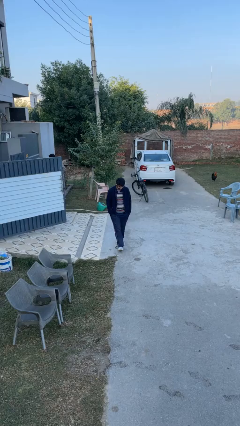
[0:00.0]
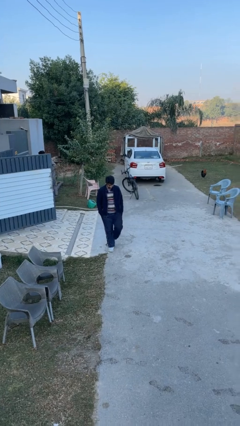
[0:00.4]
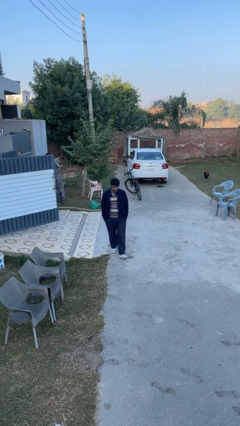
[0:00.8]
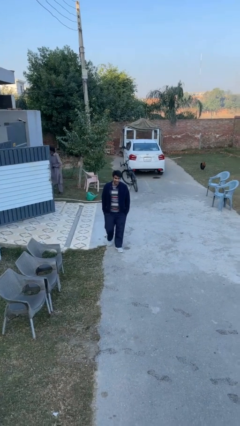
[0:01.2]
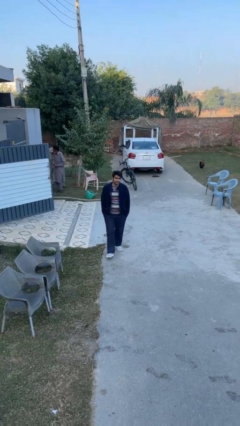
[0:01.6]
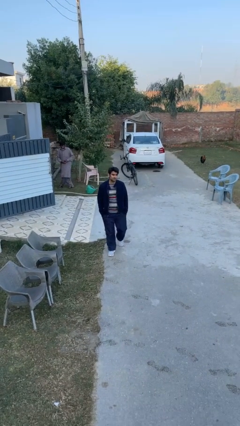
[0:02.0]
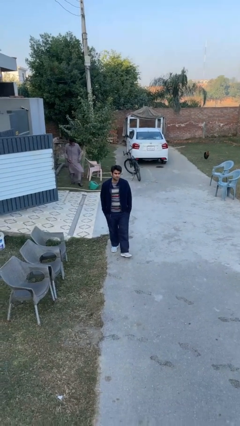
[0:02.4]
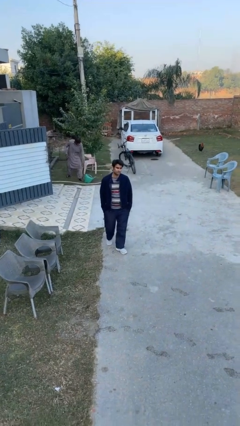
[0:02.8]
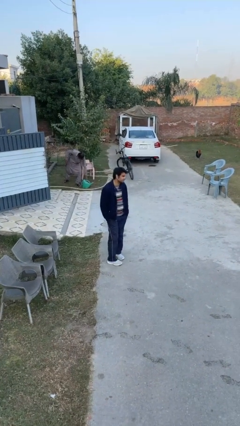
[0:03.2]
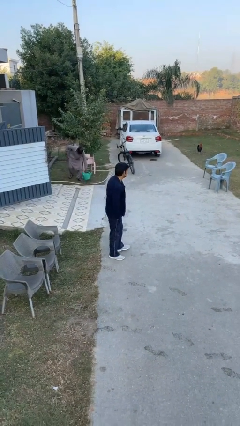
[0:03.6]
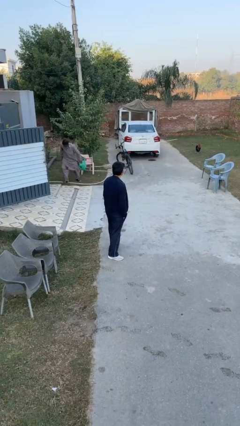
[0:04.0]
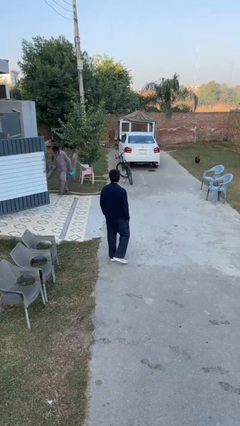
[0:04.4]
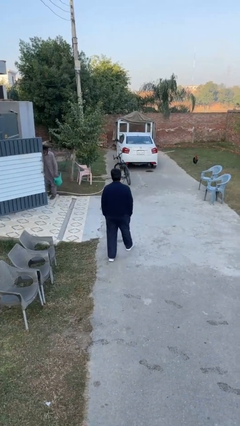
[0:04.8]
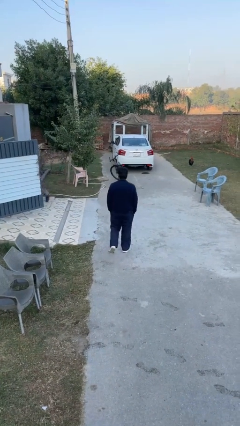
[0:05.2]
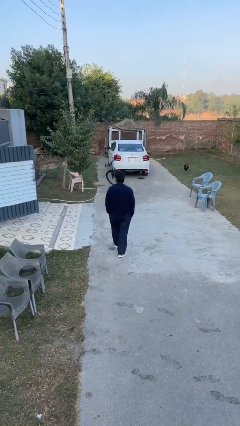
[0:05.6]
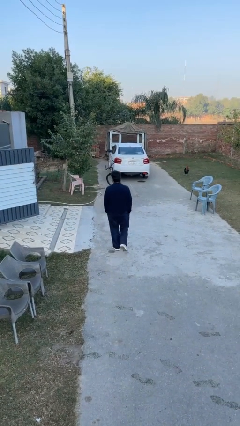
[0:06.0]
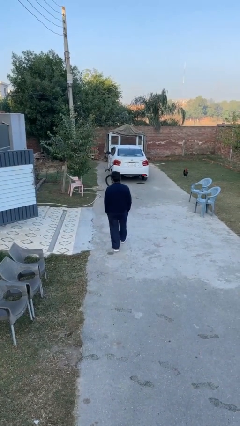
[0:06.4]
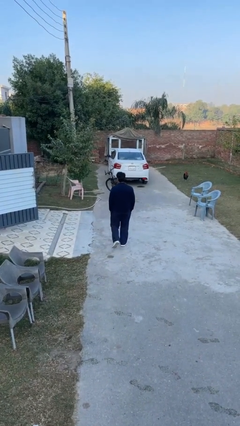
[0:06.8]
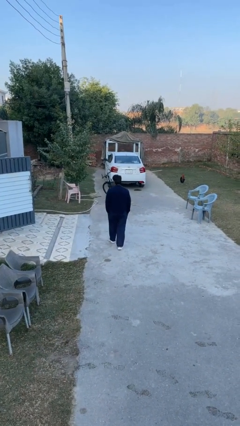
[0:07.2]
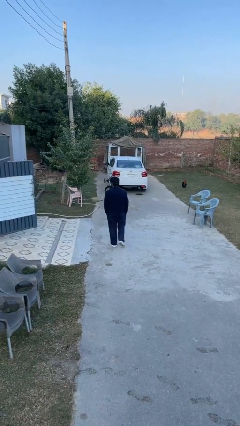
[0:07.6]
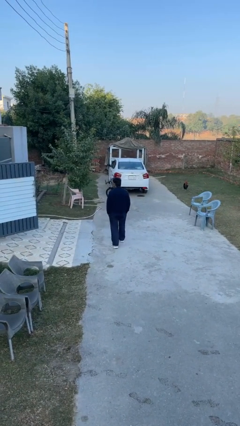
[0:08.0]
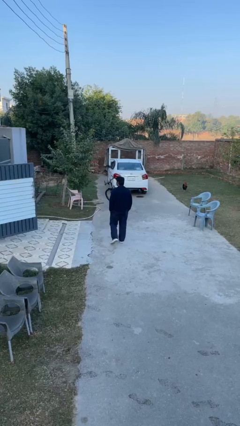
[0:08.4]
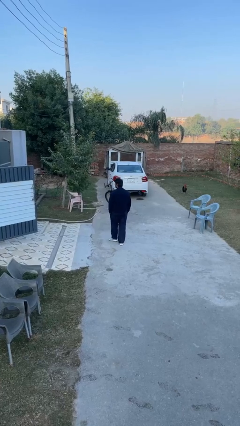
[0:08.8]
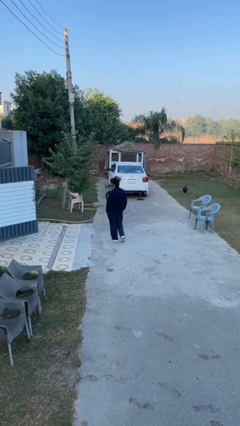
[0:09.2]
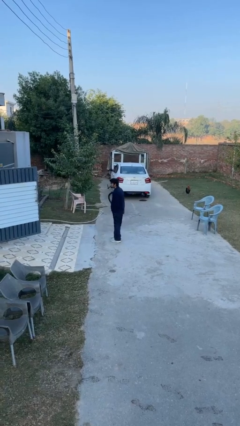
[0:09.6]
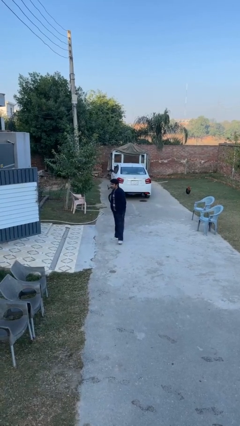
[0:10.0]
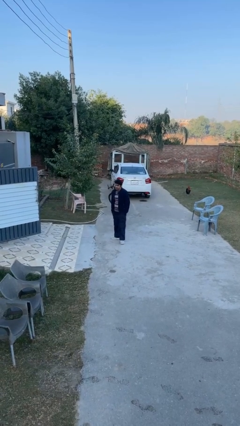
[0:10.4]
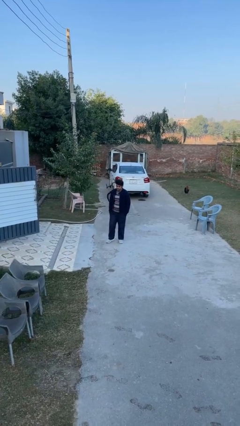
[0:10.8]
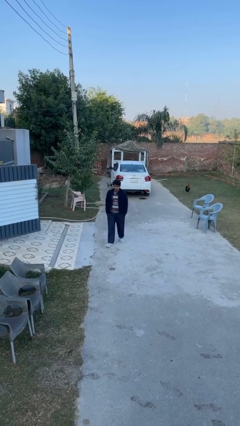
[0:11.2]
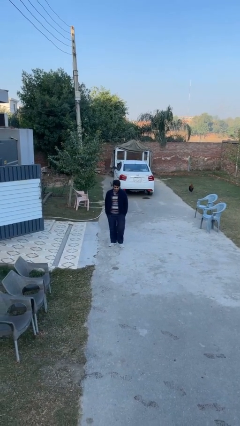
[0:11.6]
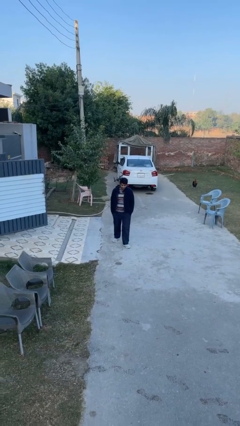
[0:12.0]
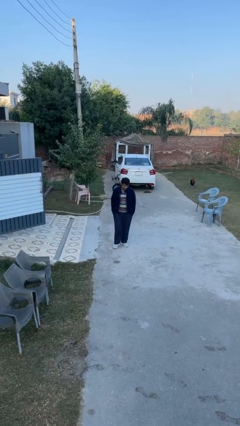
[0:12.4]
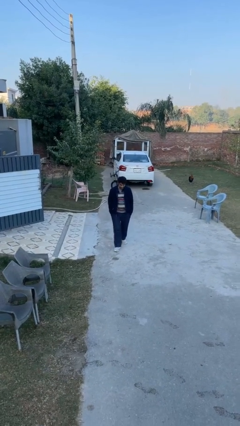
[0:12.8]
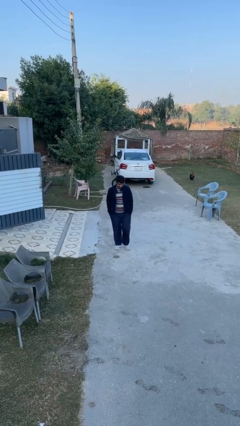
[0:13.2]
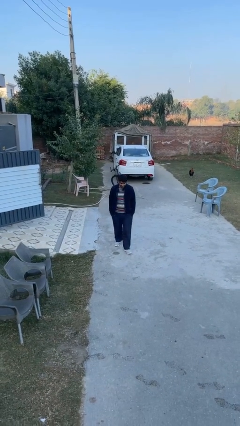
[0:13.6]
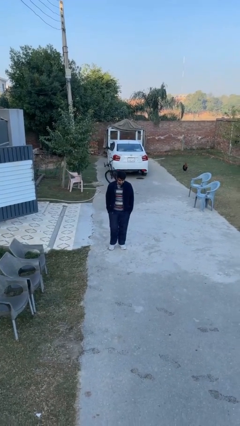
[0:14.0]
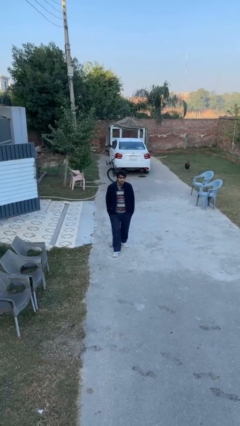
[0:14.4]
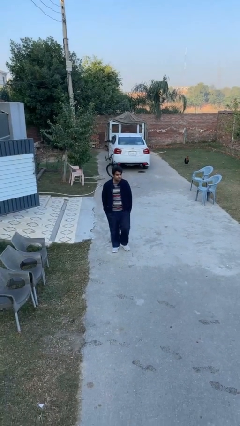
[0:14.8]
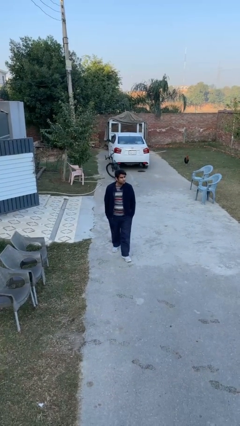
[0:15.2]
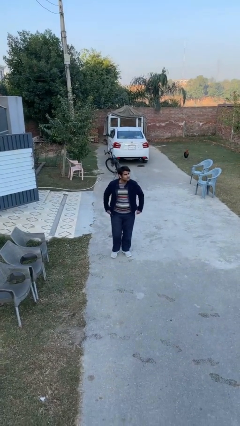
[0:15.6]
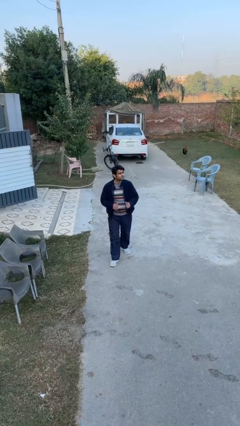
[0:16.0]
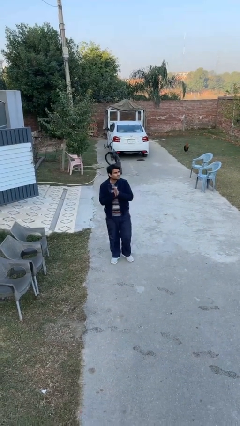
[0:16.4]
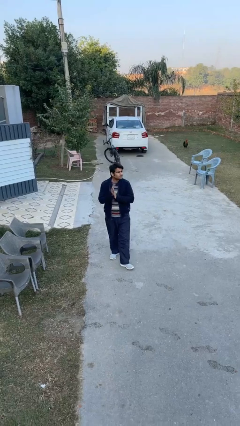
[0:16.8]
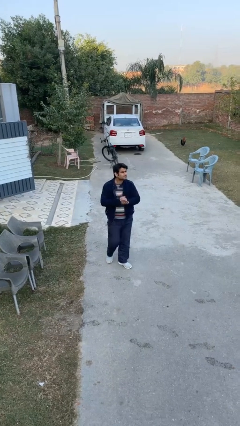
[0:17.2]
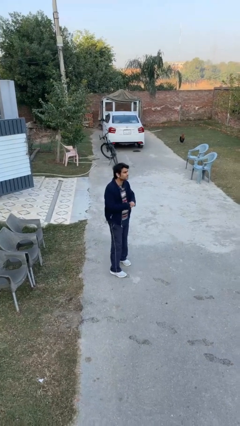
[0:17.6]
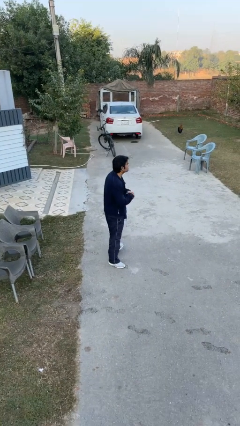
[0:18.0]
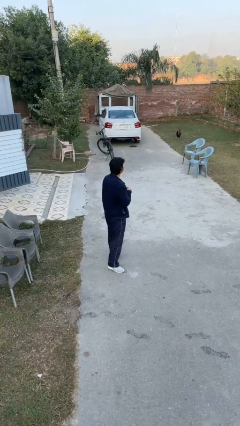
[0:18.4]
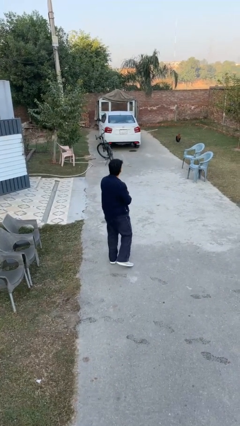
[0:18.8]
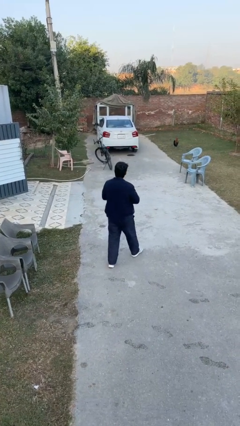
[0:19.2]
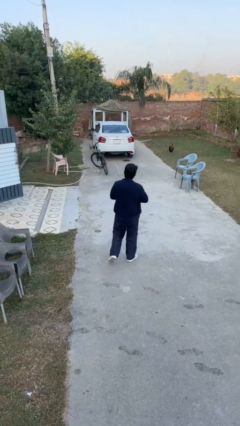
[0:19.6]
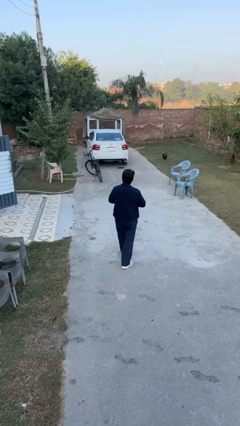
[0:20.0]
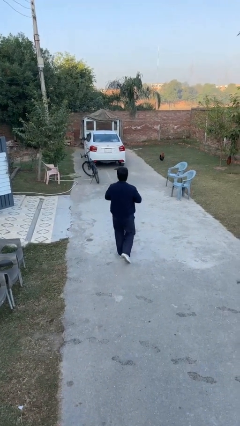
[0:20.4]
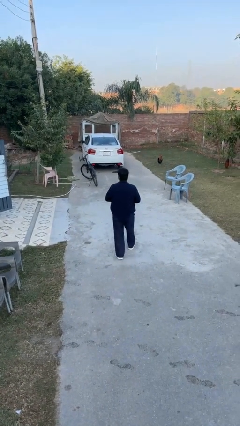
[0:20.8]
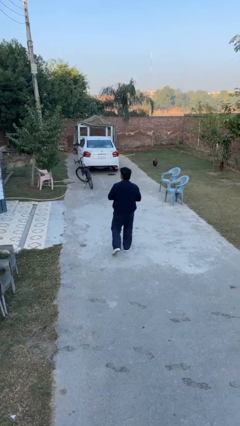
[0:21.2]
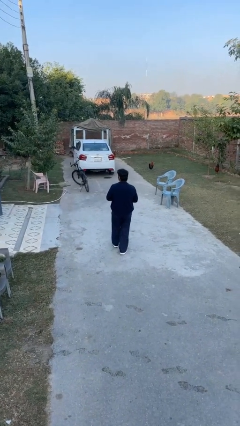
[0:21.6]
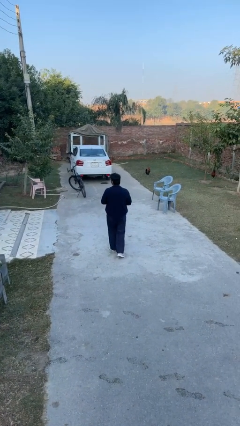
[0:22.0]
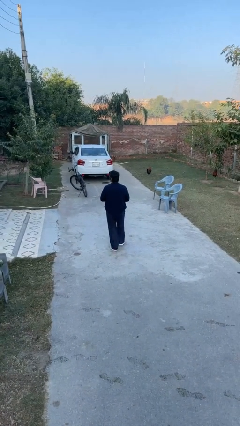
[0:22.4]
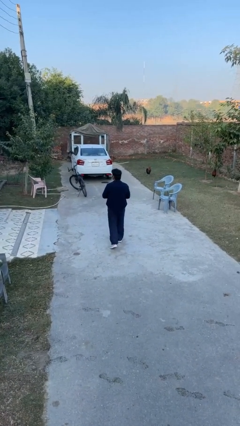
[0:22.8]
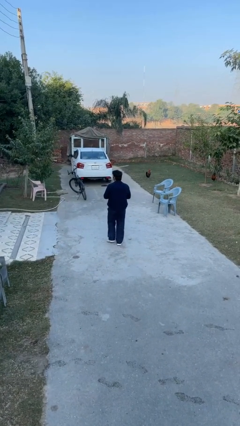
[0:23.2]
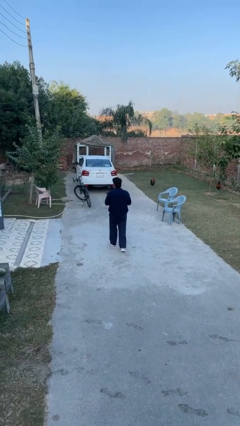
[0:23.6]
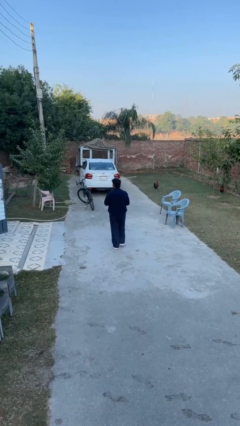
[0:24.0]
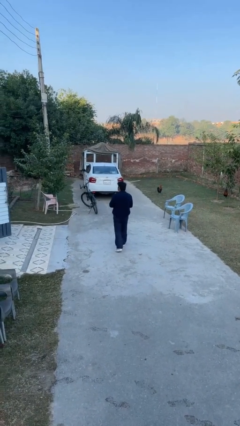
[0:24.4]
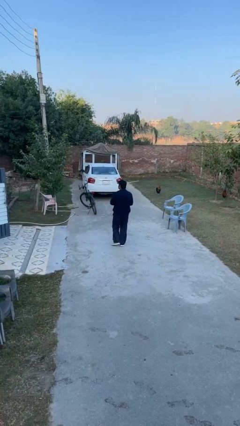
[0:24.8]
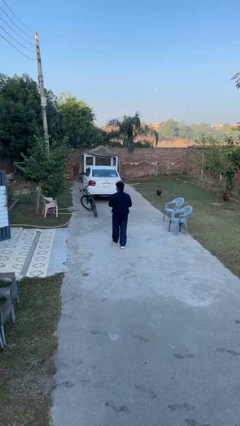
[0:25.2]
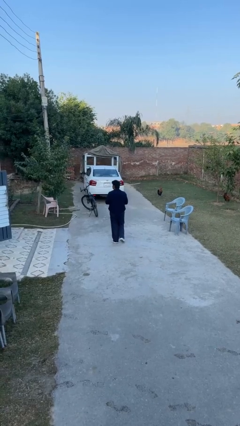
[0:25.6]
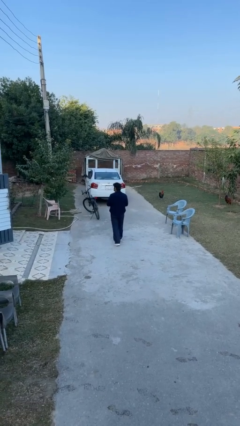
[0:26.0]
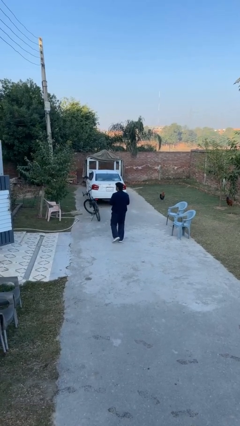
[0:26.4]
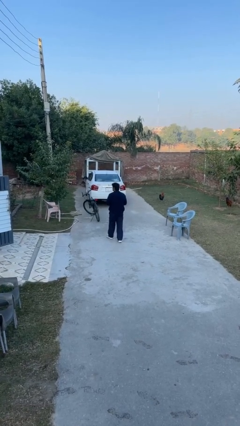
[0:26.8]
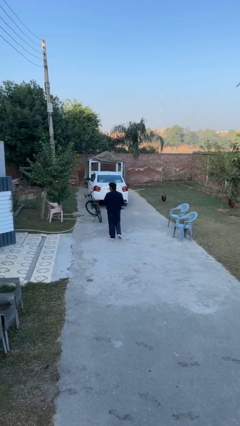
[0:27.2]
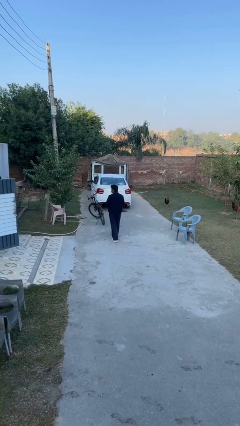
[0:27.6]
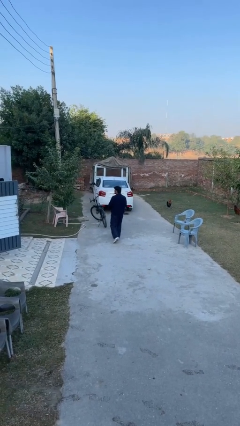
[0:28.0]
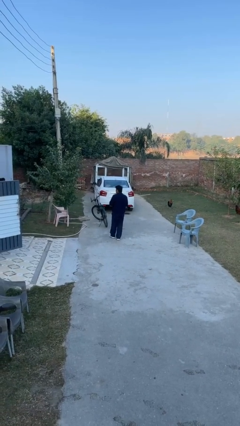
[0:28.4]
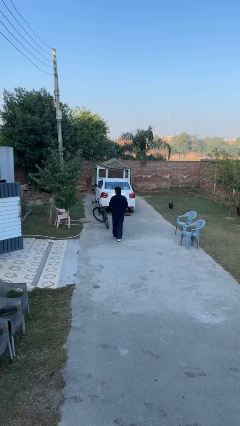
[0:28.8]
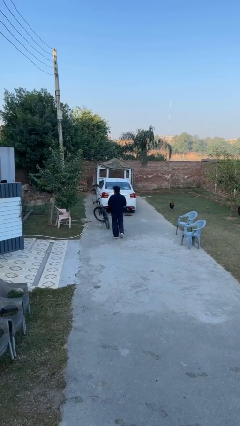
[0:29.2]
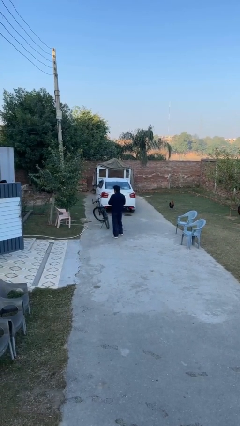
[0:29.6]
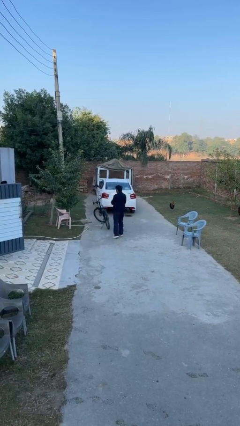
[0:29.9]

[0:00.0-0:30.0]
person walks

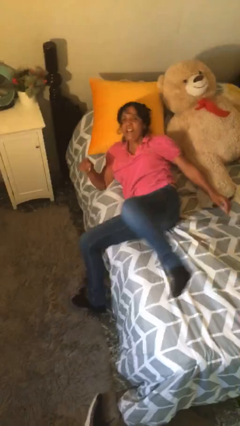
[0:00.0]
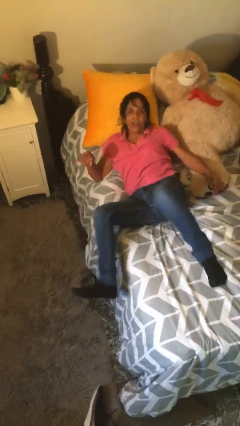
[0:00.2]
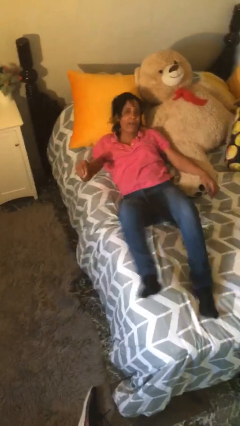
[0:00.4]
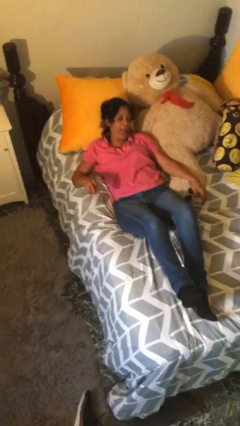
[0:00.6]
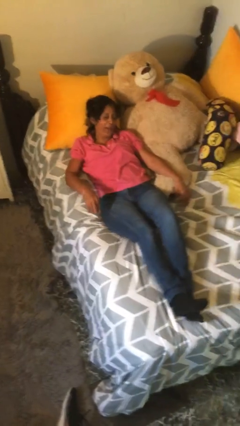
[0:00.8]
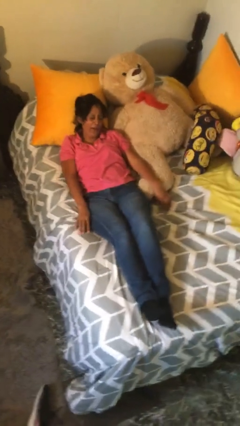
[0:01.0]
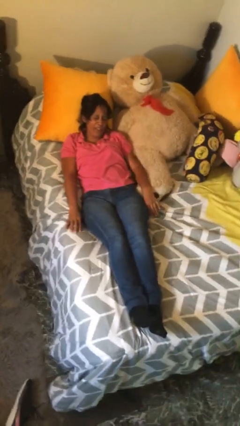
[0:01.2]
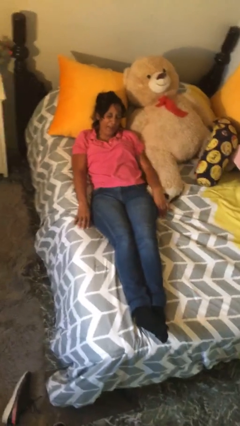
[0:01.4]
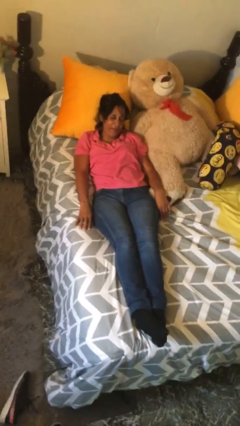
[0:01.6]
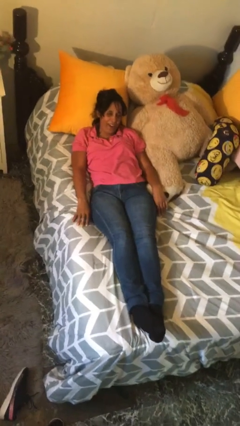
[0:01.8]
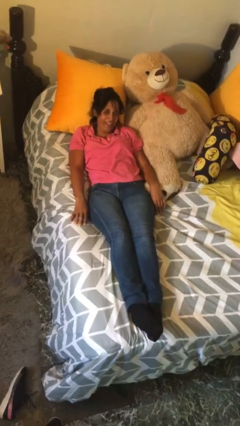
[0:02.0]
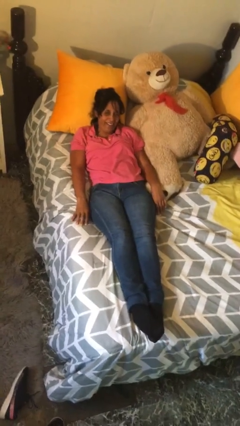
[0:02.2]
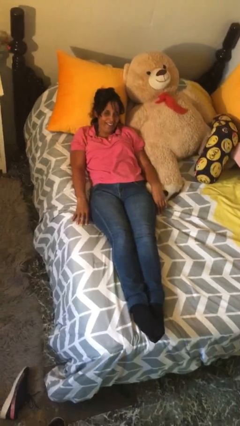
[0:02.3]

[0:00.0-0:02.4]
person lies down on bed

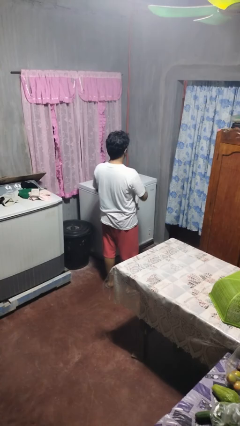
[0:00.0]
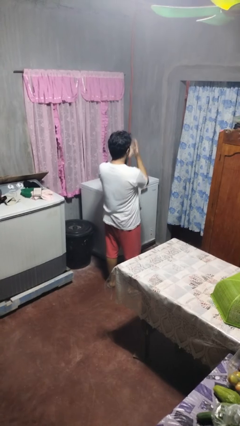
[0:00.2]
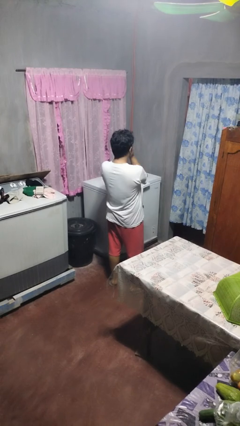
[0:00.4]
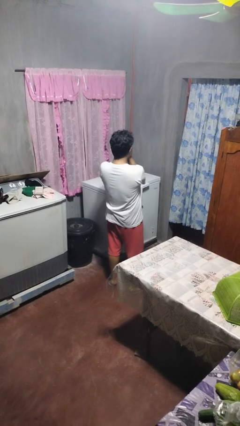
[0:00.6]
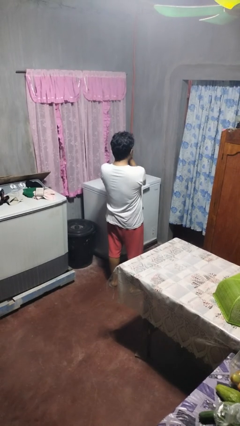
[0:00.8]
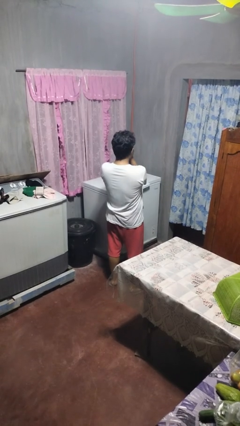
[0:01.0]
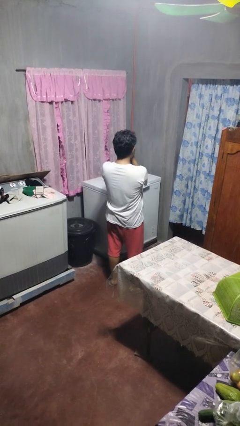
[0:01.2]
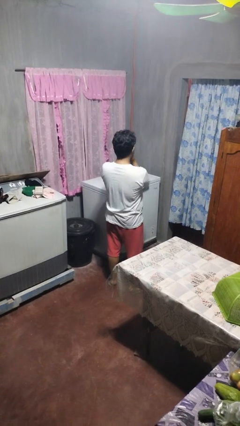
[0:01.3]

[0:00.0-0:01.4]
person covers face with hands
